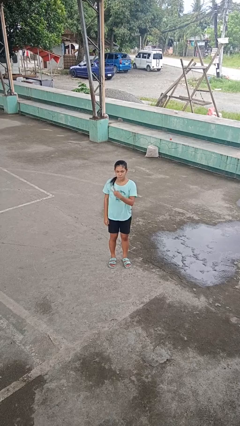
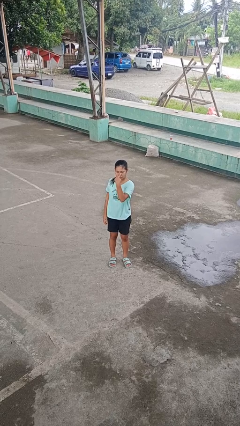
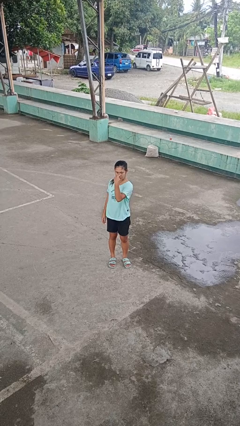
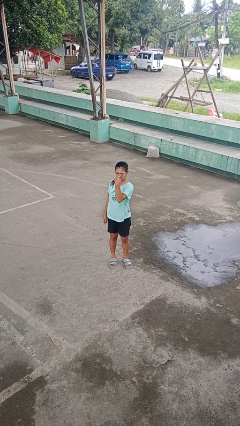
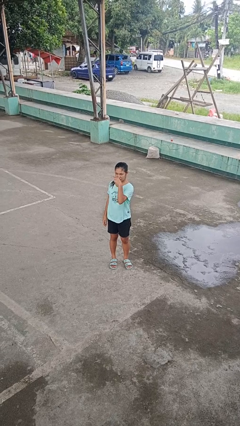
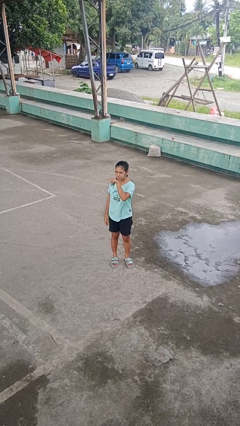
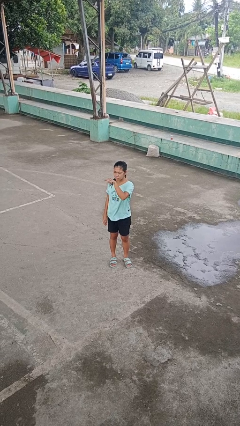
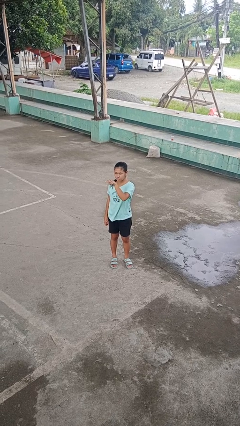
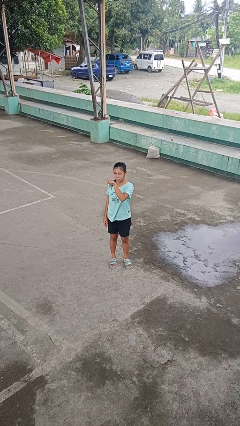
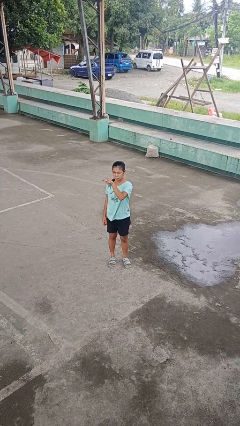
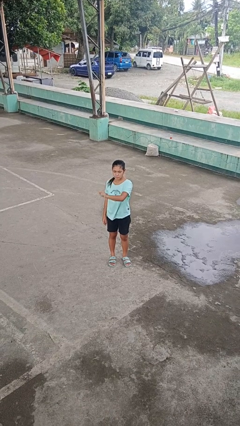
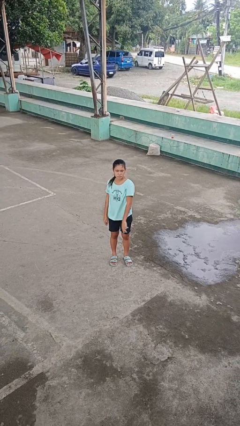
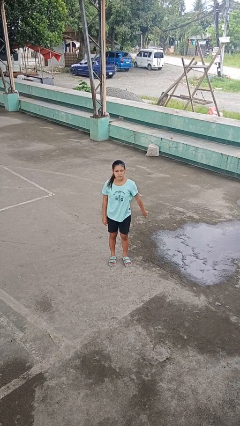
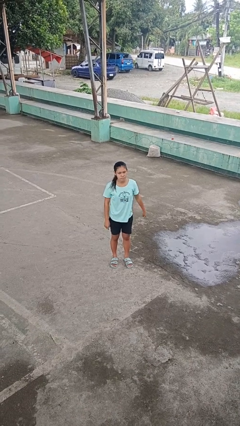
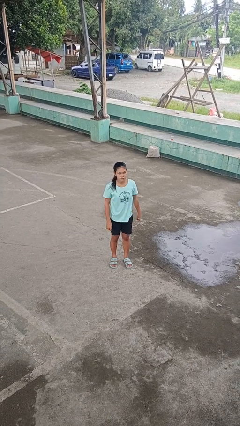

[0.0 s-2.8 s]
person gestures watch closely

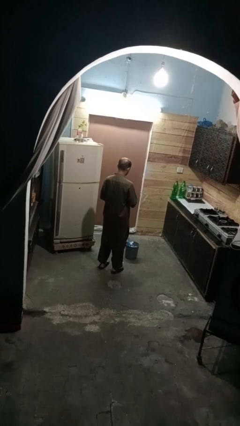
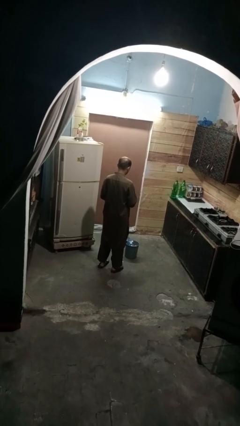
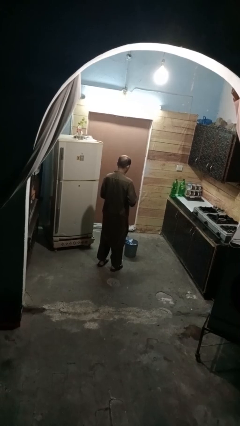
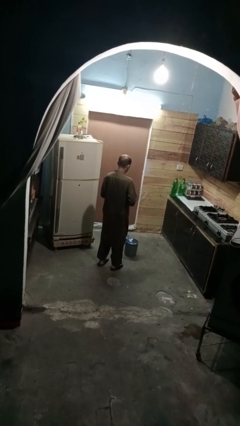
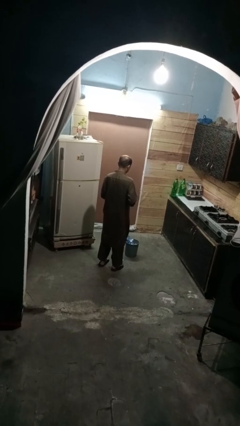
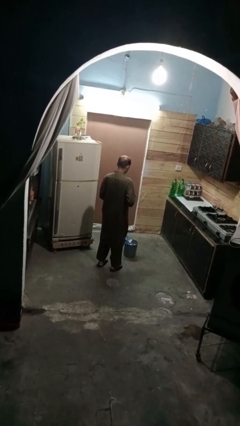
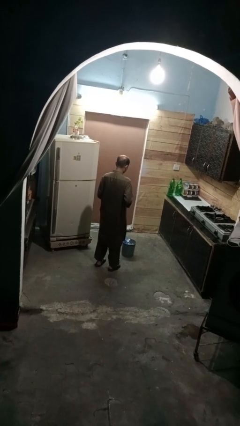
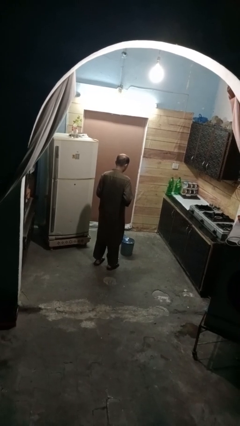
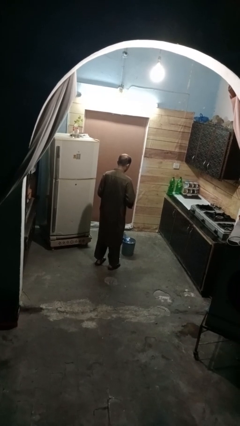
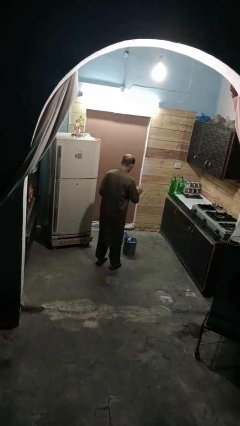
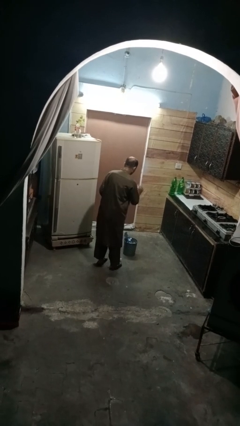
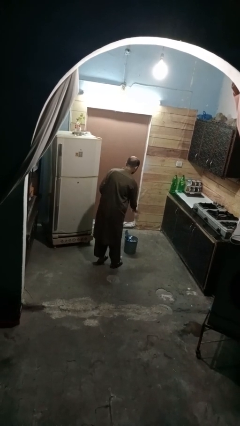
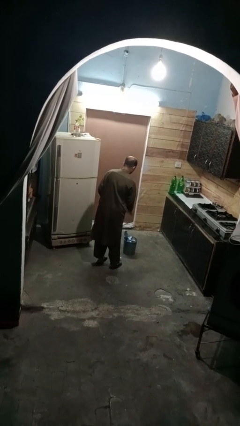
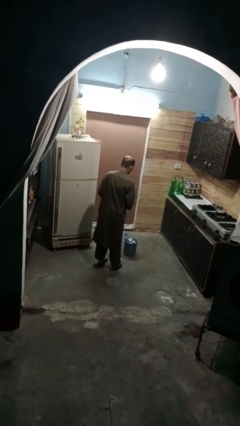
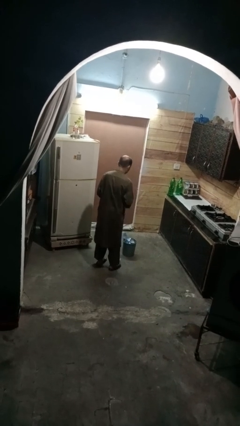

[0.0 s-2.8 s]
person discards trash

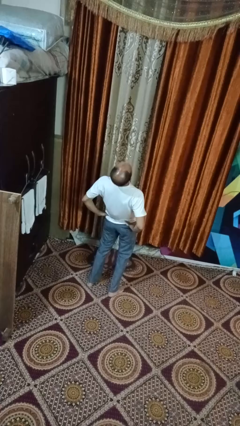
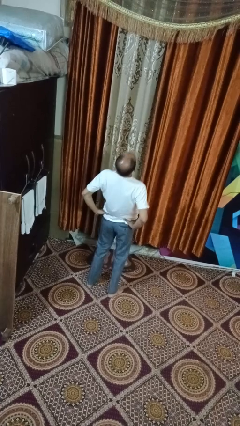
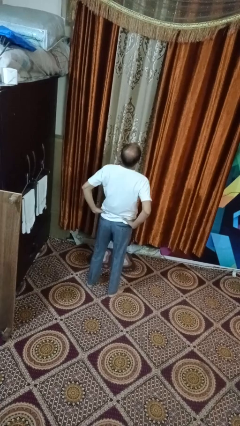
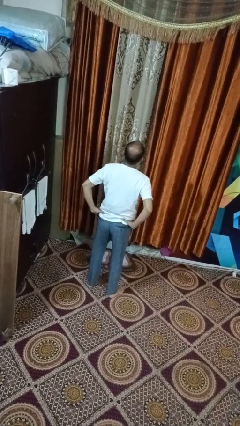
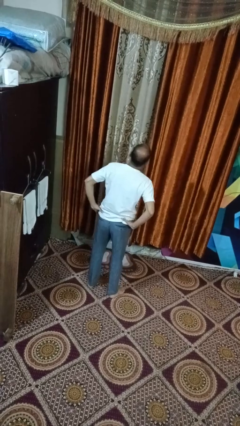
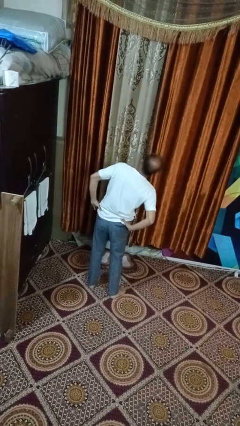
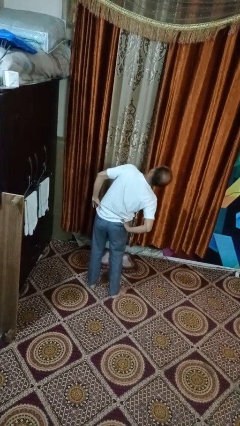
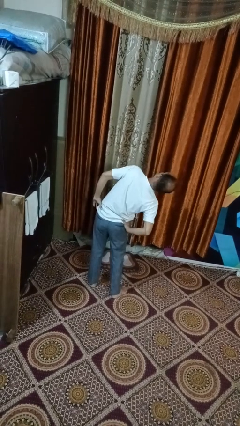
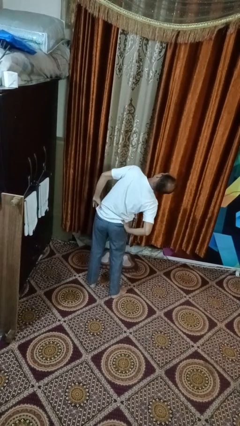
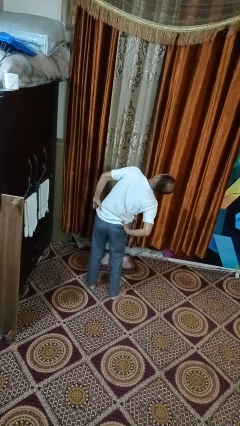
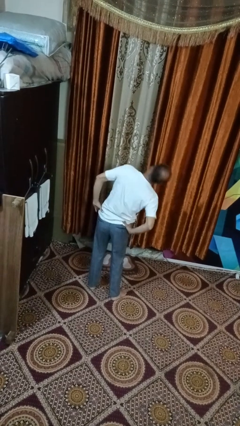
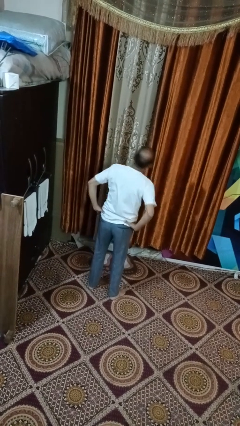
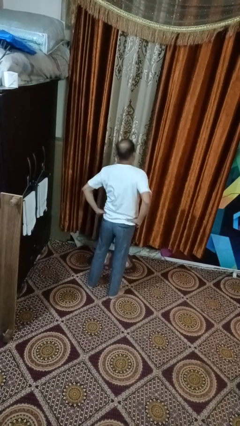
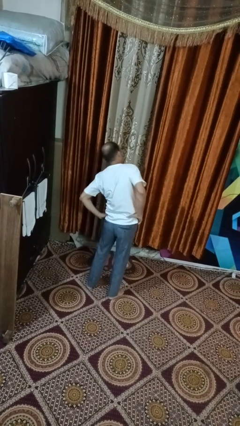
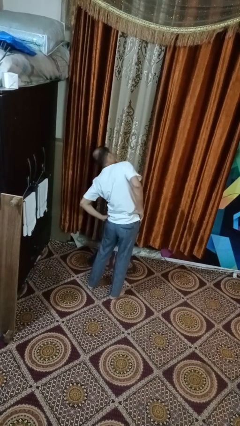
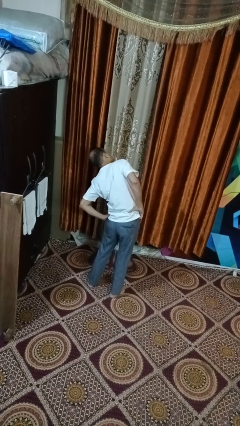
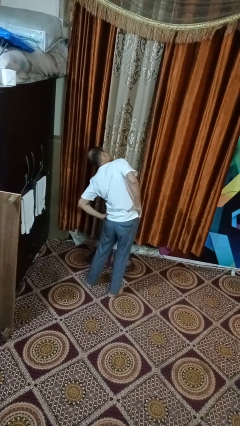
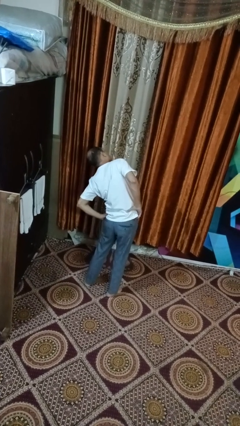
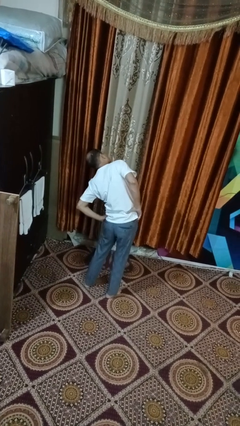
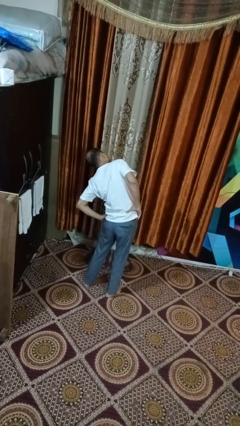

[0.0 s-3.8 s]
person stretches arms to side

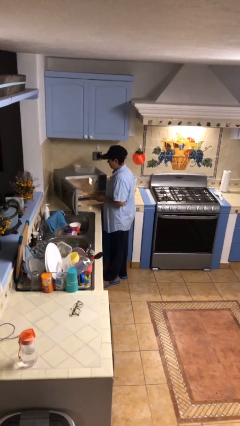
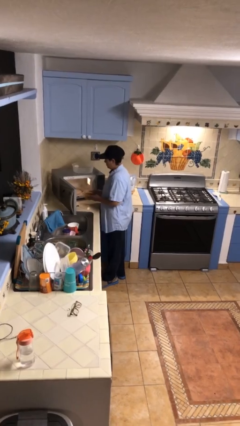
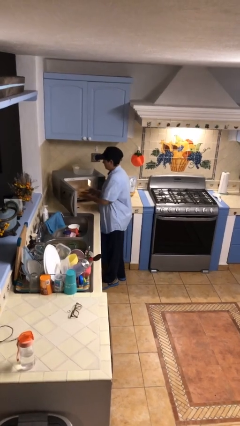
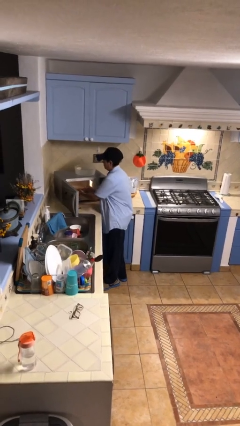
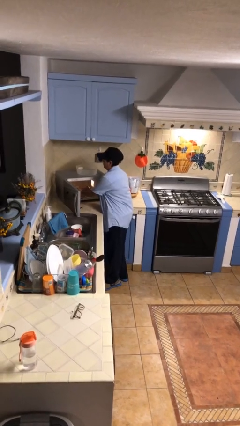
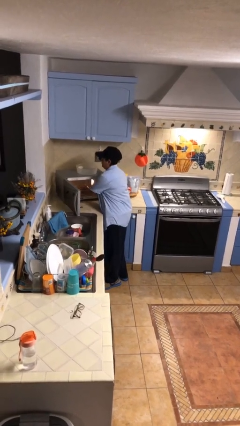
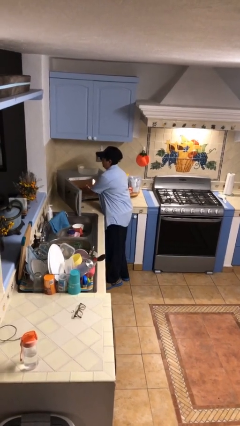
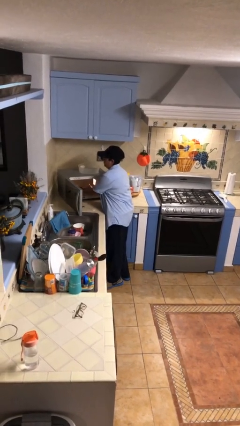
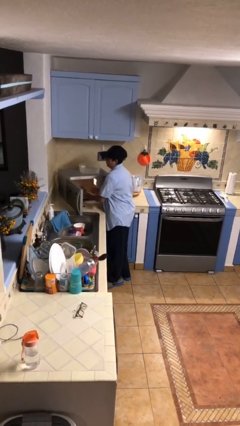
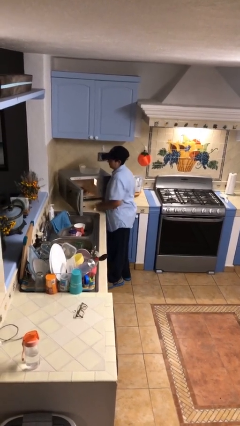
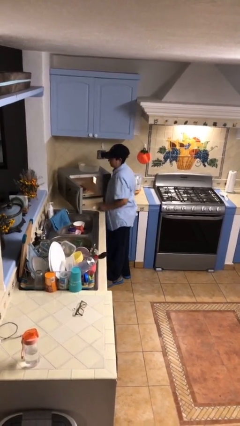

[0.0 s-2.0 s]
person puts object into microwave

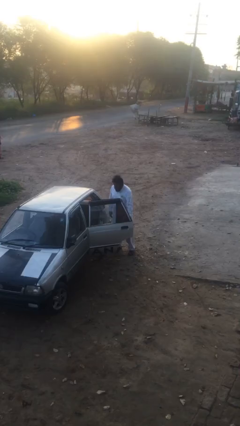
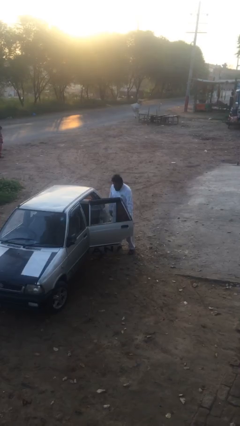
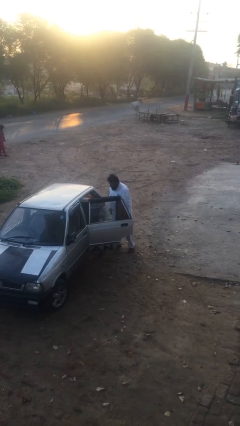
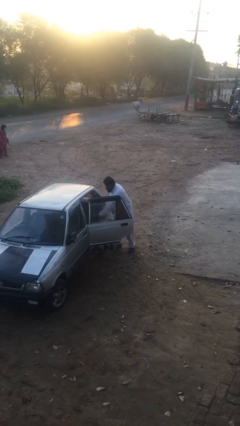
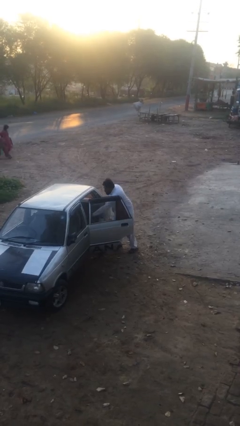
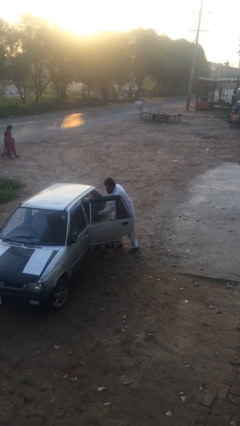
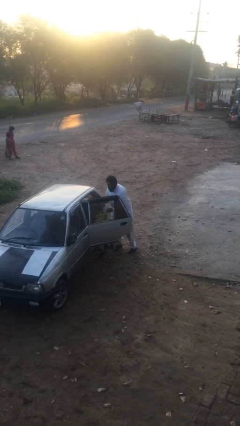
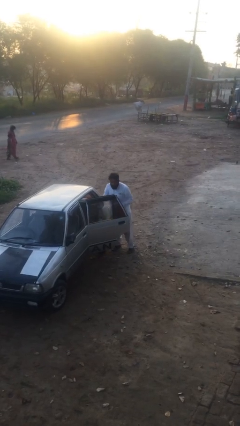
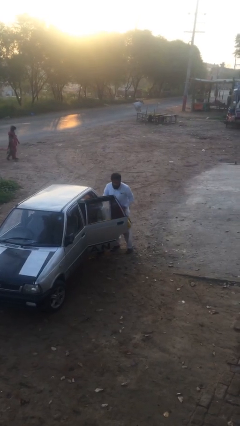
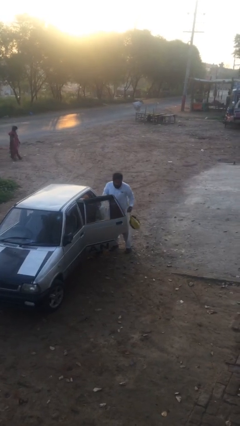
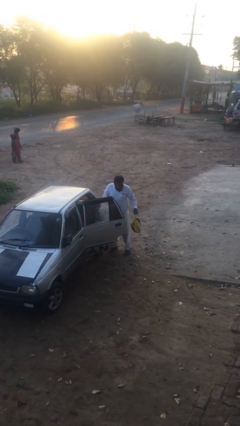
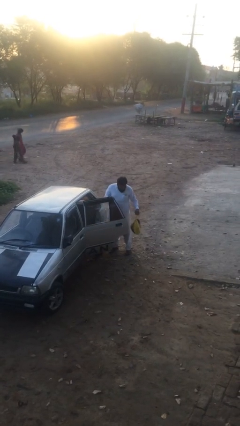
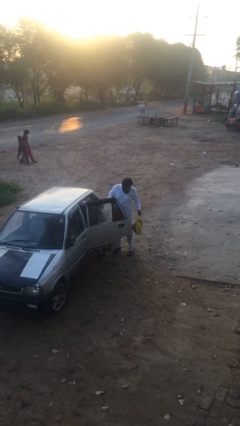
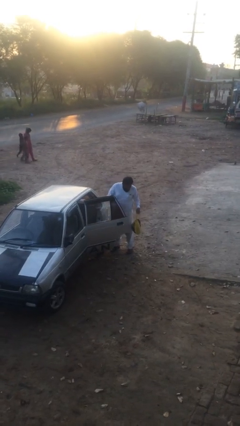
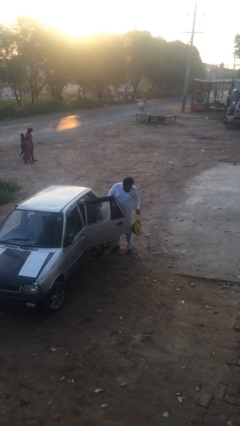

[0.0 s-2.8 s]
person unloads car

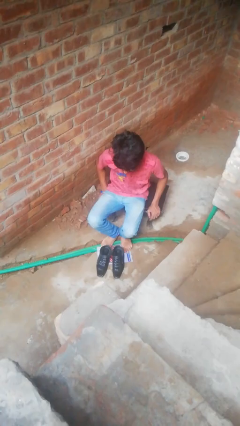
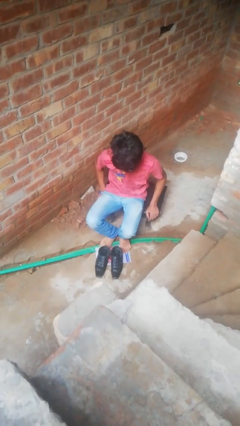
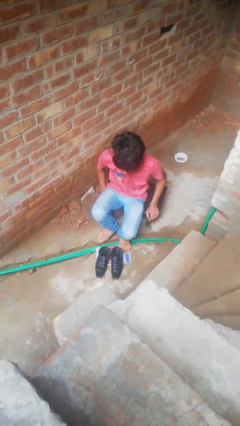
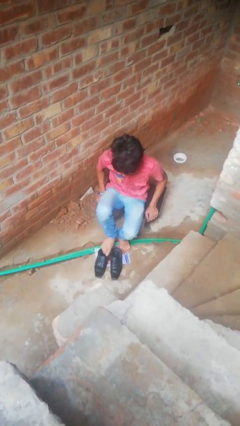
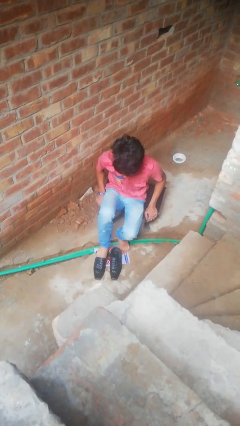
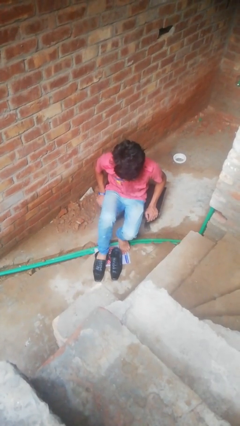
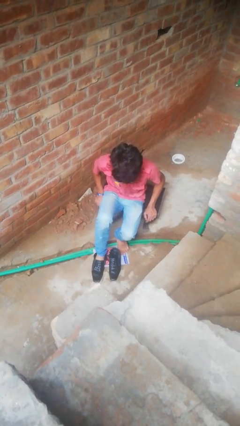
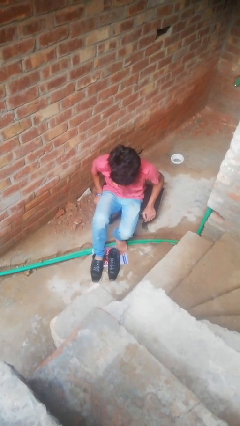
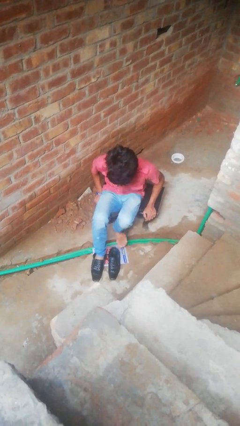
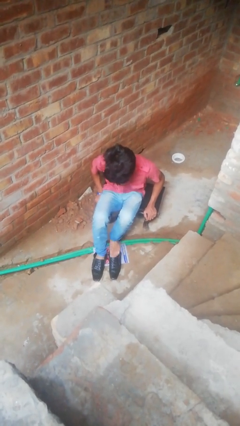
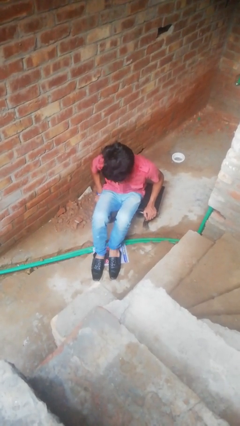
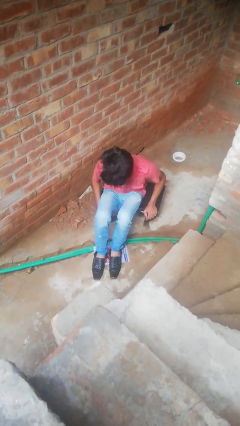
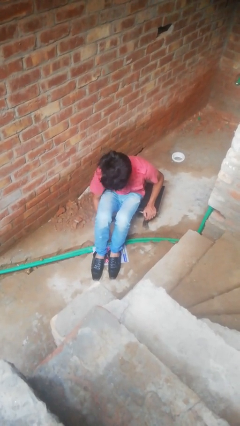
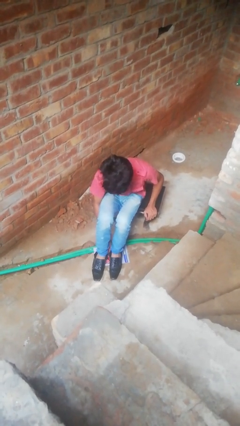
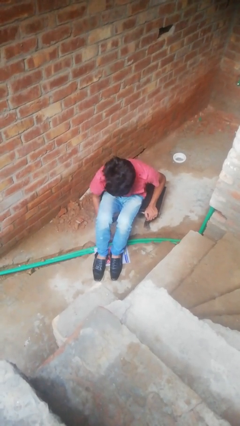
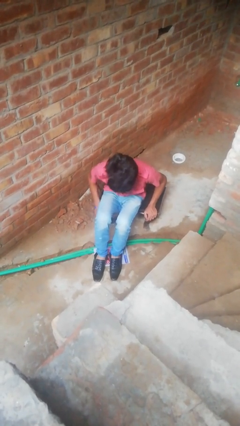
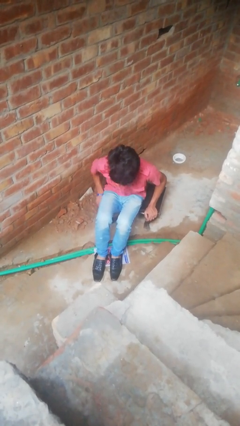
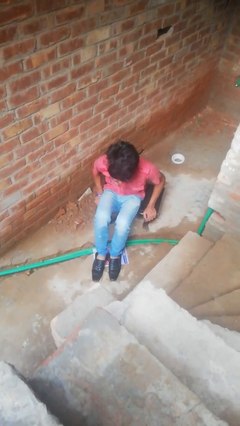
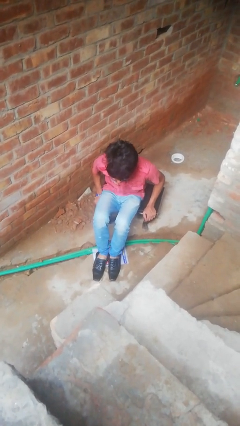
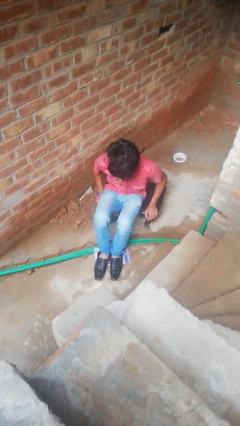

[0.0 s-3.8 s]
person puts on shoes
